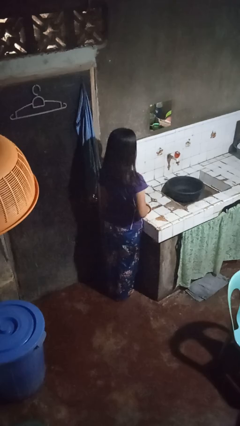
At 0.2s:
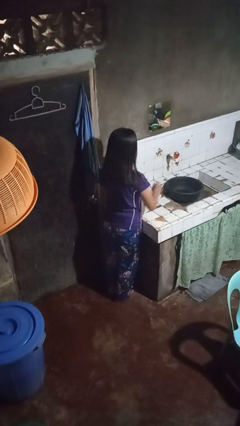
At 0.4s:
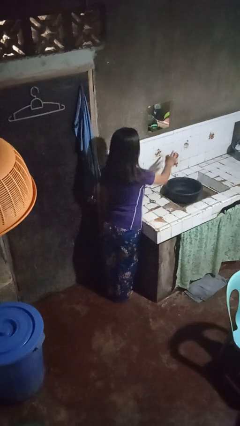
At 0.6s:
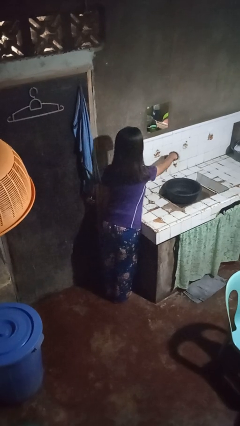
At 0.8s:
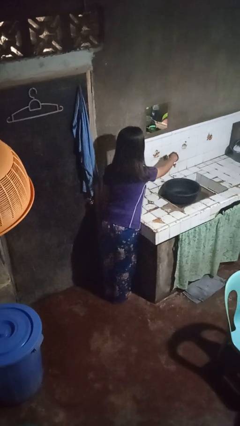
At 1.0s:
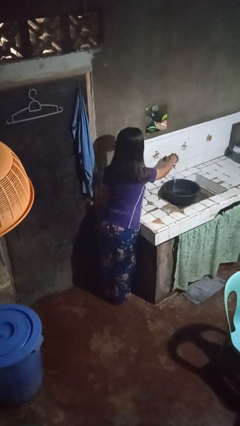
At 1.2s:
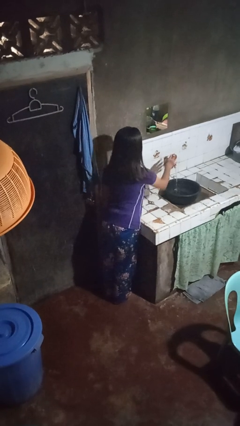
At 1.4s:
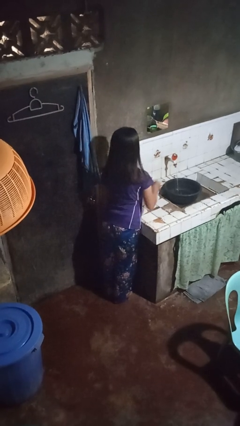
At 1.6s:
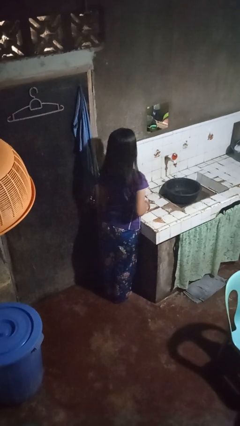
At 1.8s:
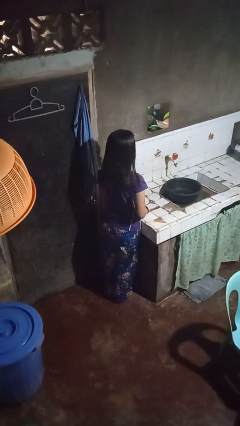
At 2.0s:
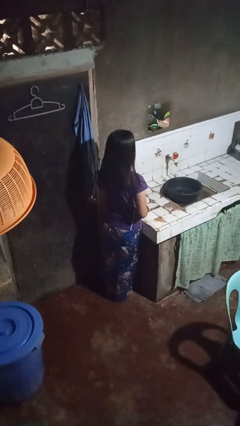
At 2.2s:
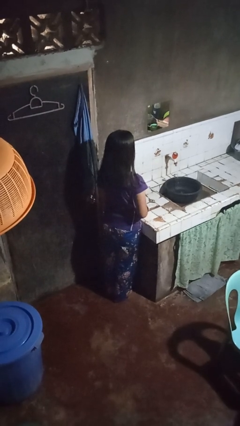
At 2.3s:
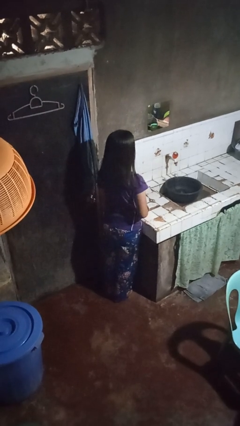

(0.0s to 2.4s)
person turns on faucet

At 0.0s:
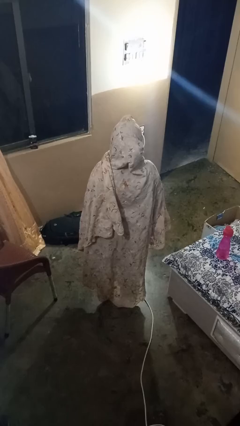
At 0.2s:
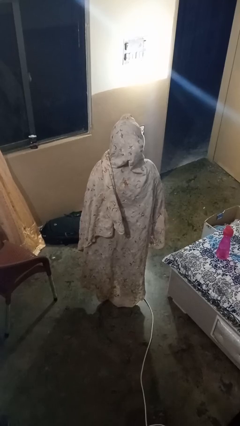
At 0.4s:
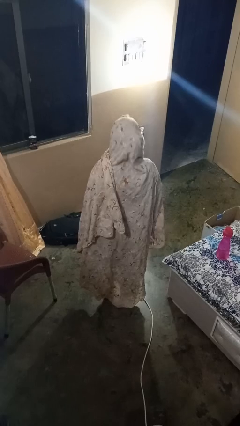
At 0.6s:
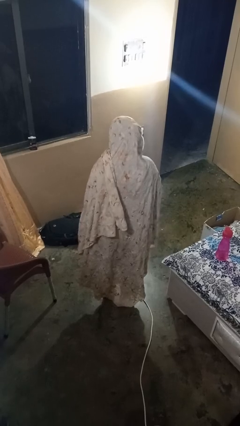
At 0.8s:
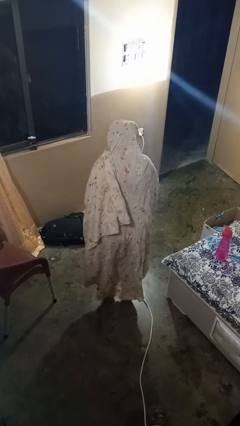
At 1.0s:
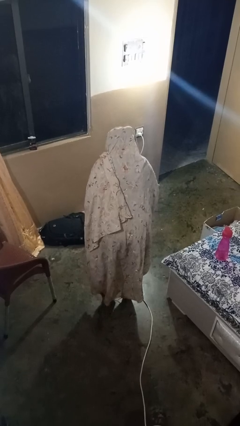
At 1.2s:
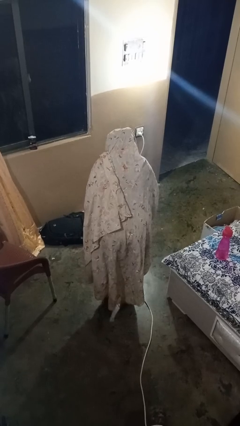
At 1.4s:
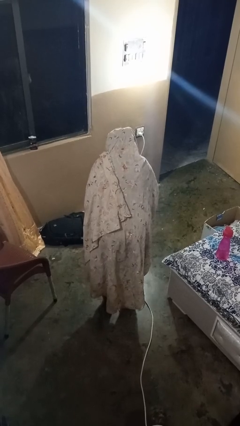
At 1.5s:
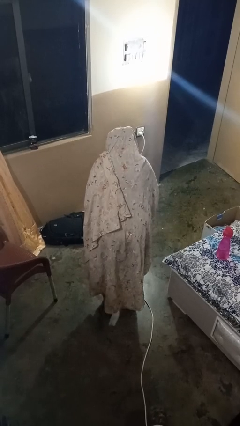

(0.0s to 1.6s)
person bows

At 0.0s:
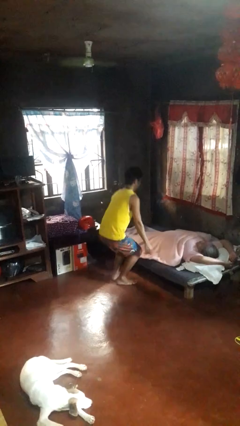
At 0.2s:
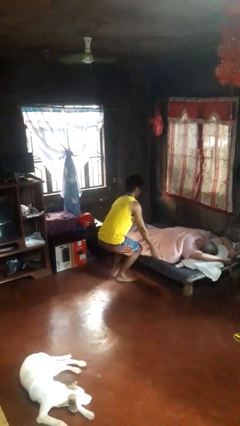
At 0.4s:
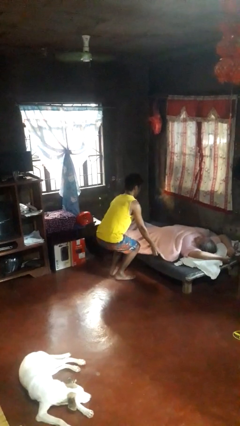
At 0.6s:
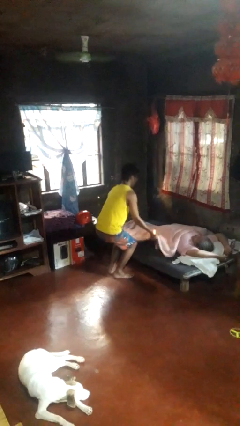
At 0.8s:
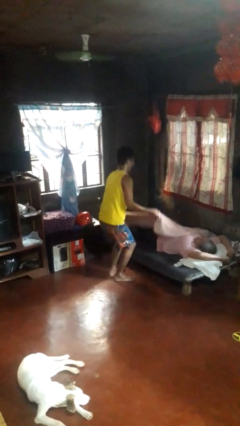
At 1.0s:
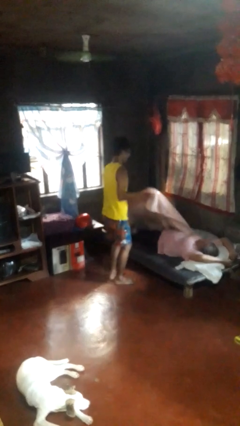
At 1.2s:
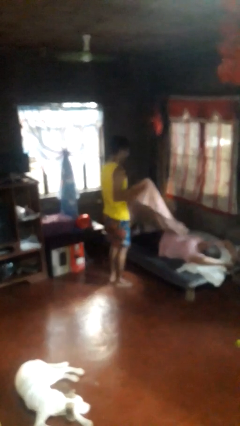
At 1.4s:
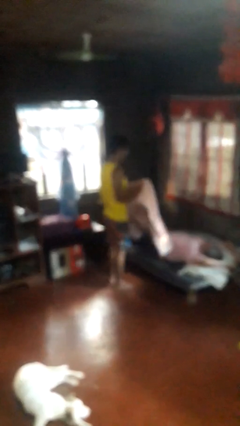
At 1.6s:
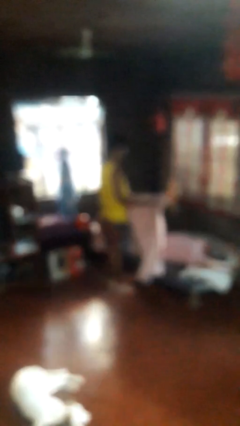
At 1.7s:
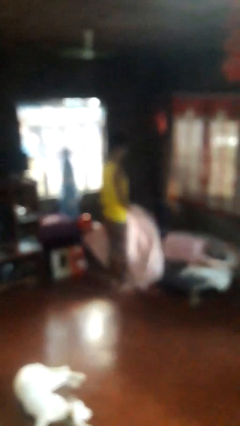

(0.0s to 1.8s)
person uncovers friend with blanket

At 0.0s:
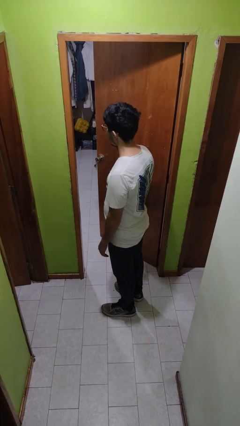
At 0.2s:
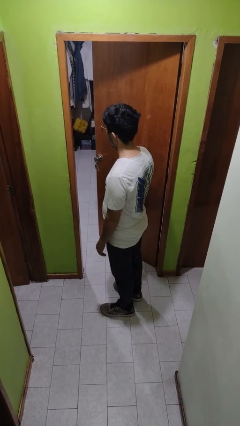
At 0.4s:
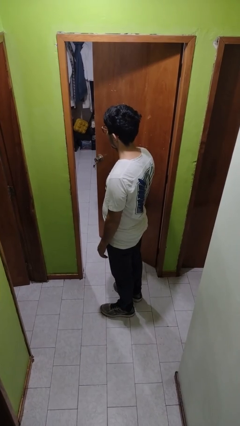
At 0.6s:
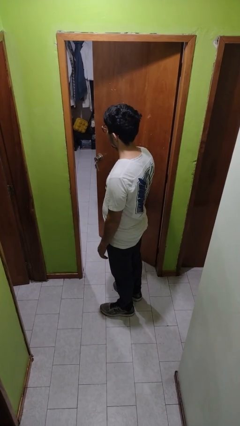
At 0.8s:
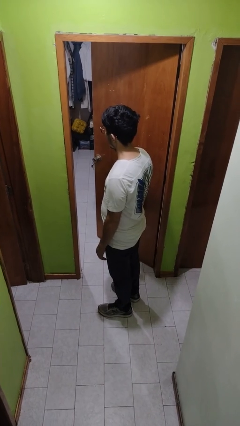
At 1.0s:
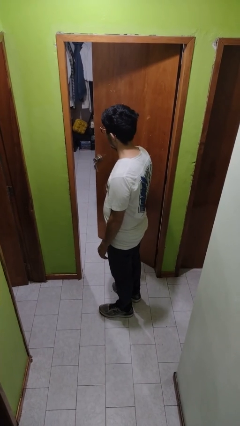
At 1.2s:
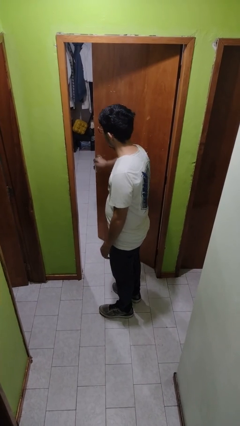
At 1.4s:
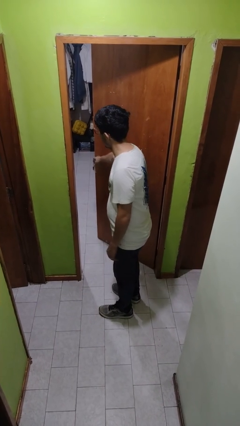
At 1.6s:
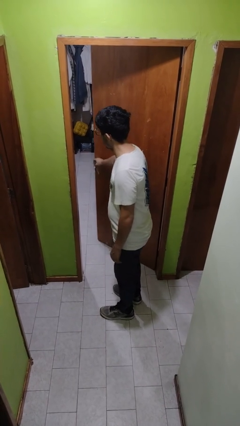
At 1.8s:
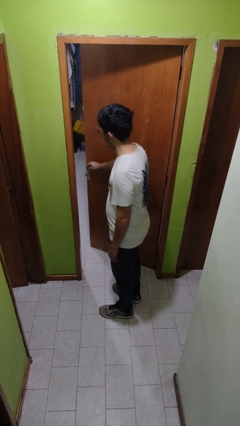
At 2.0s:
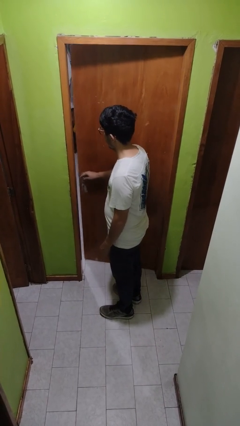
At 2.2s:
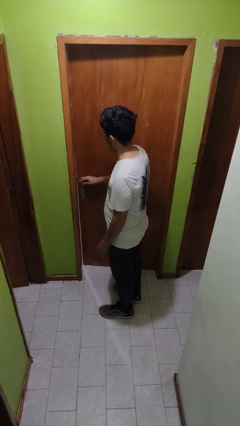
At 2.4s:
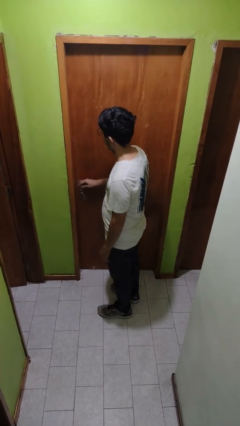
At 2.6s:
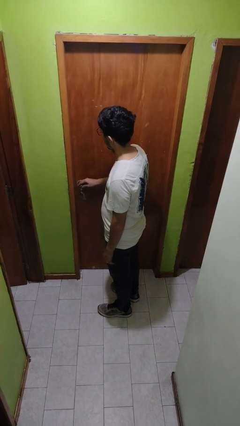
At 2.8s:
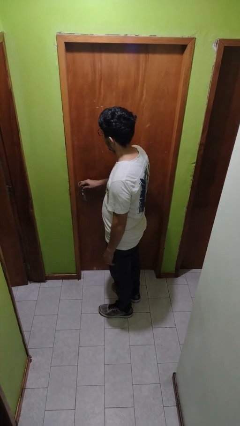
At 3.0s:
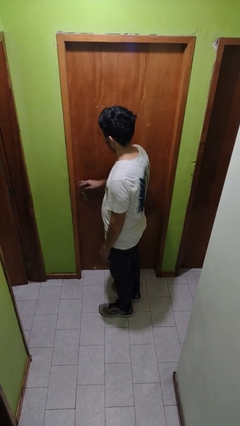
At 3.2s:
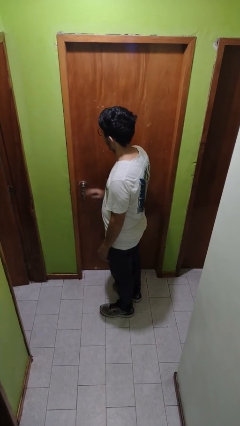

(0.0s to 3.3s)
person closes facility door

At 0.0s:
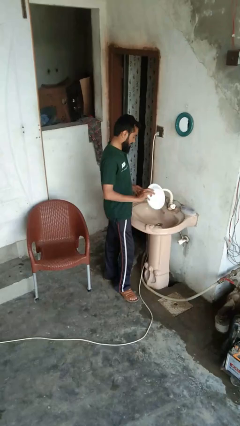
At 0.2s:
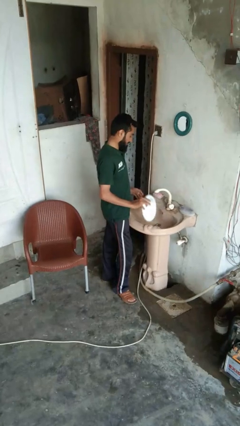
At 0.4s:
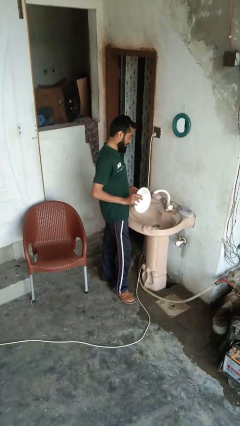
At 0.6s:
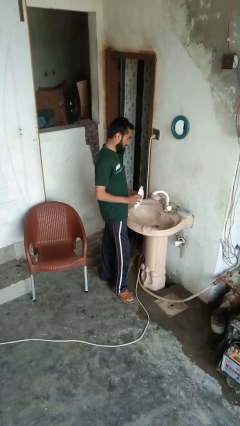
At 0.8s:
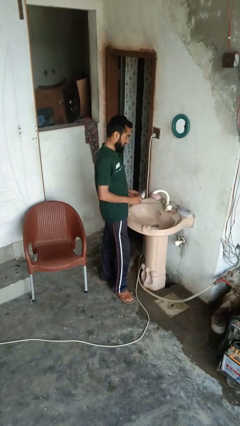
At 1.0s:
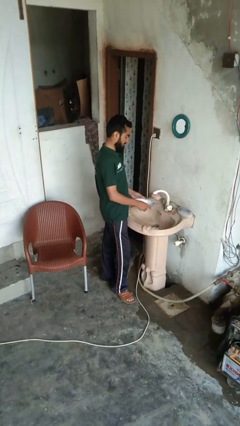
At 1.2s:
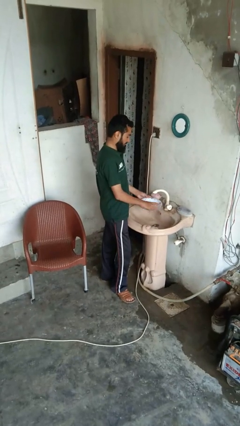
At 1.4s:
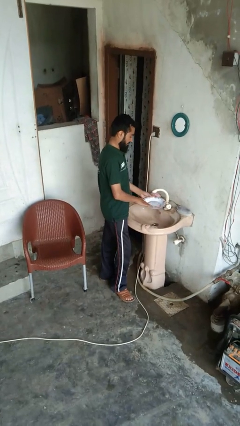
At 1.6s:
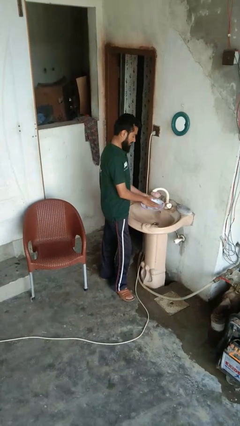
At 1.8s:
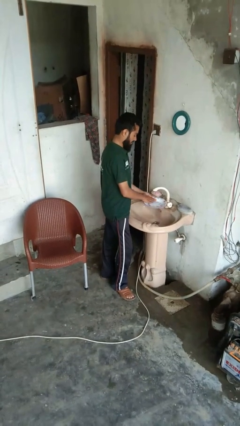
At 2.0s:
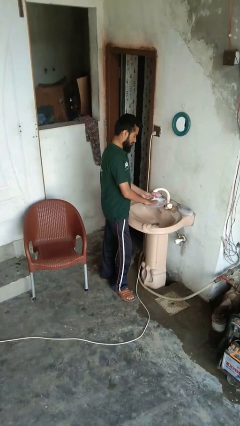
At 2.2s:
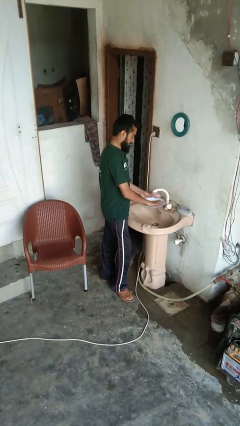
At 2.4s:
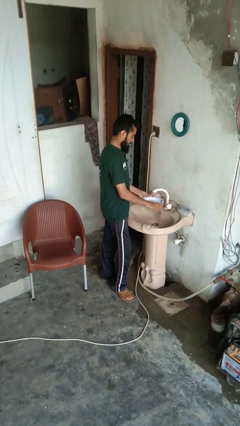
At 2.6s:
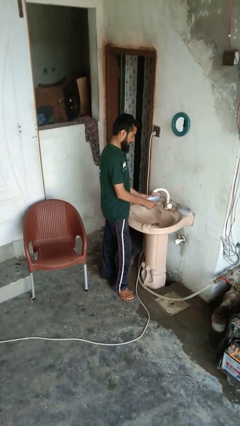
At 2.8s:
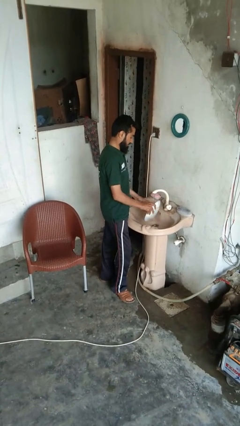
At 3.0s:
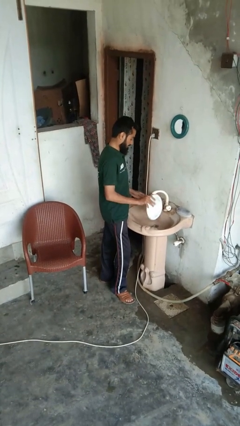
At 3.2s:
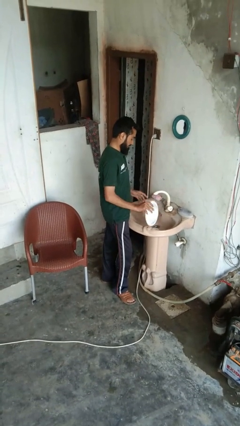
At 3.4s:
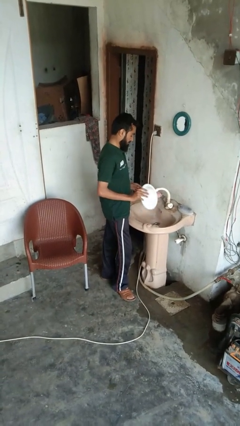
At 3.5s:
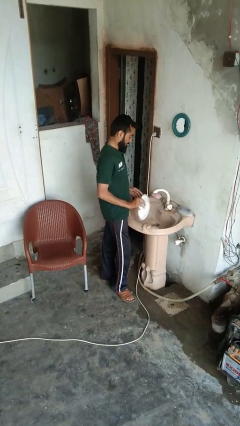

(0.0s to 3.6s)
person washes dish

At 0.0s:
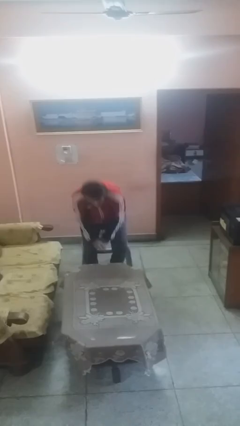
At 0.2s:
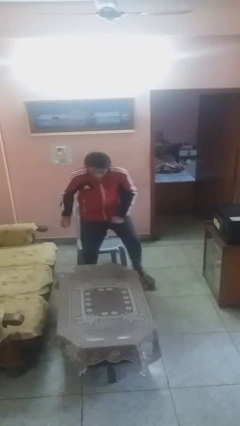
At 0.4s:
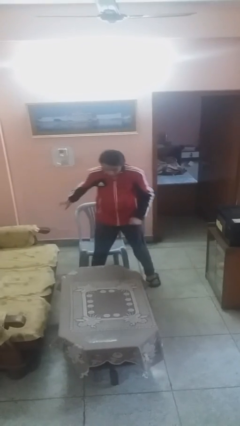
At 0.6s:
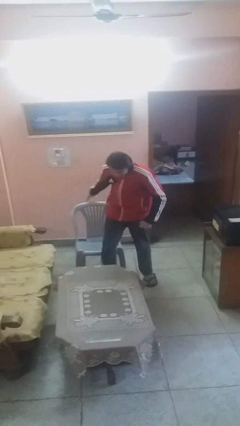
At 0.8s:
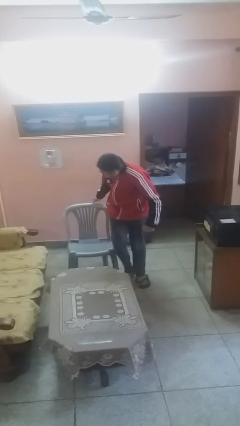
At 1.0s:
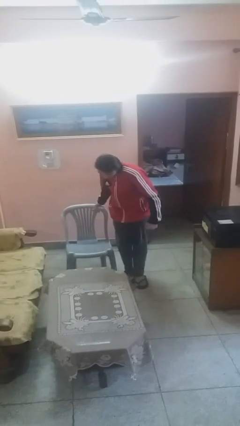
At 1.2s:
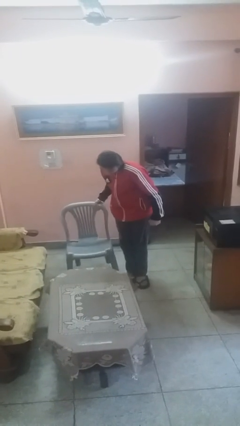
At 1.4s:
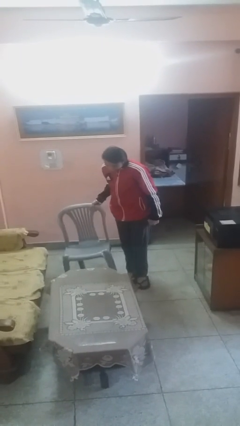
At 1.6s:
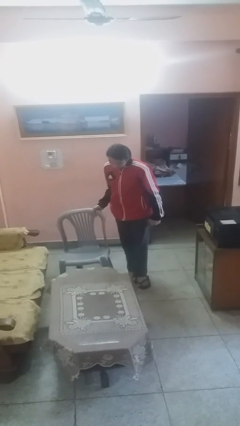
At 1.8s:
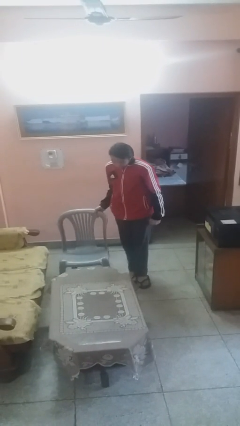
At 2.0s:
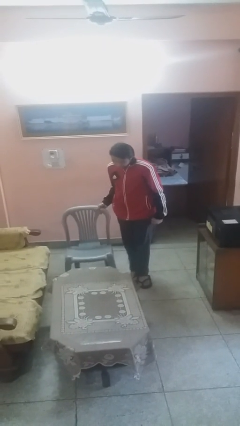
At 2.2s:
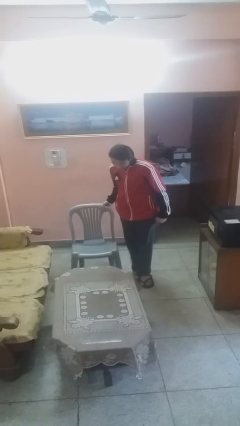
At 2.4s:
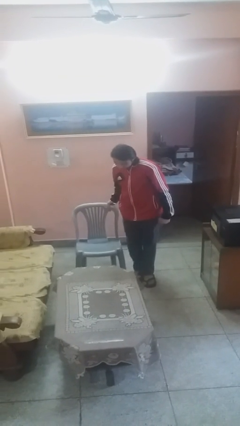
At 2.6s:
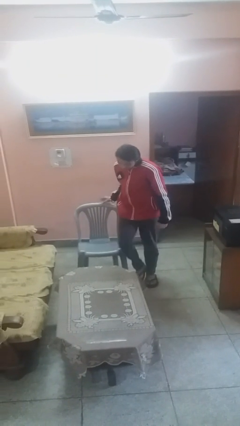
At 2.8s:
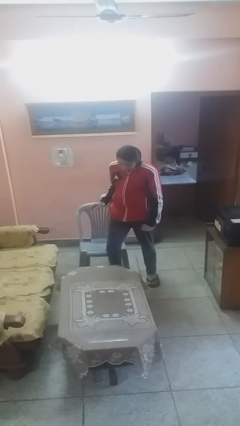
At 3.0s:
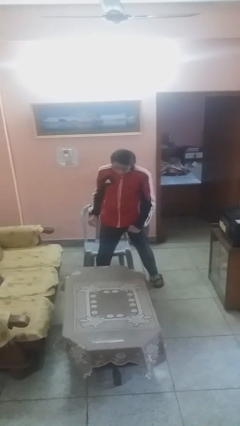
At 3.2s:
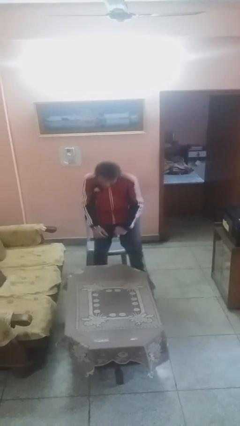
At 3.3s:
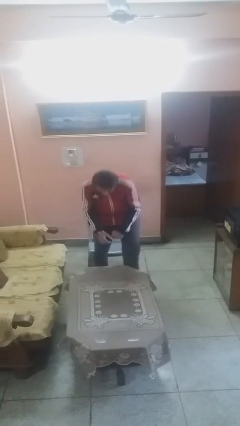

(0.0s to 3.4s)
person stands up

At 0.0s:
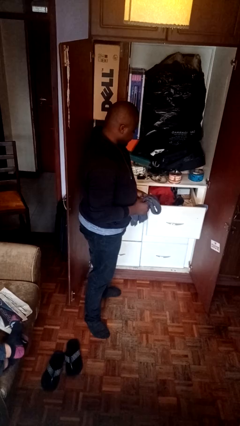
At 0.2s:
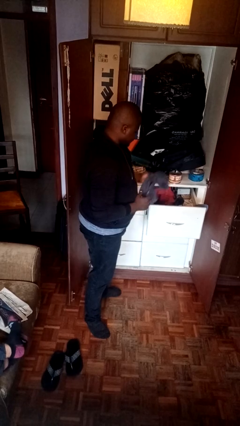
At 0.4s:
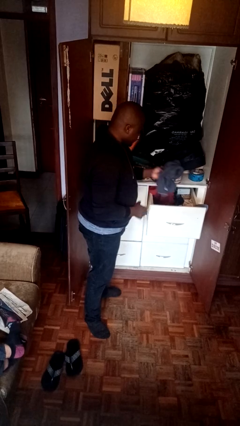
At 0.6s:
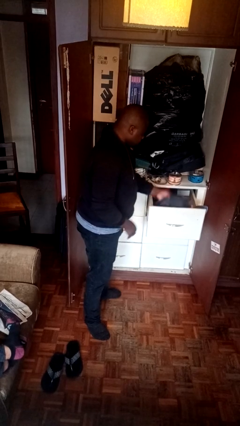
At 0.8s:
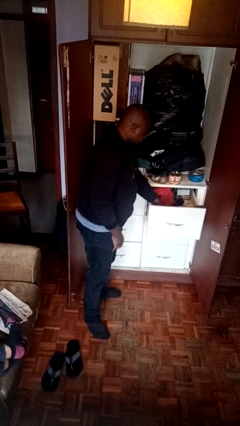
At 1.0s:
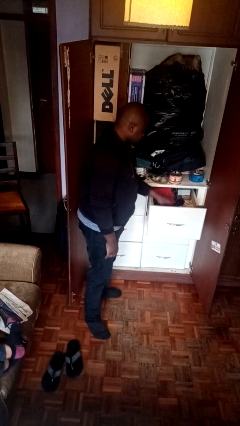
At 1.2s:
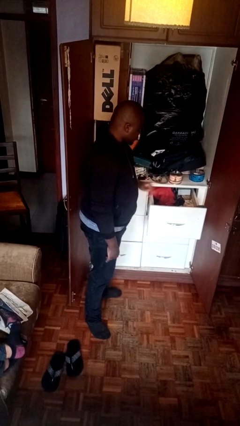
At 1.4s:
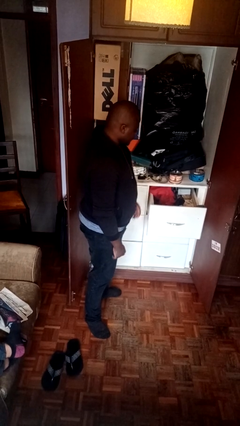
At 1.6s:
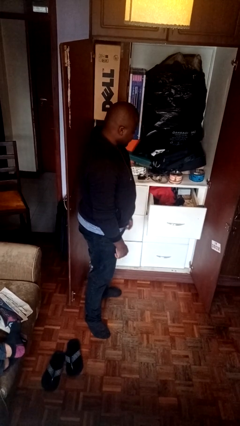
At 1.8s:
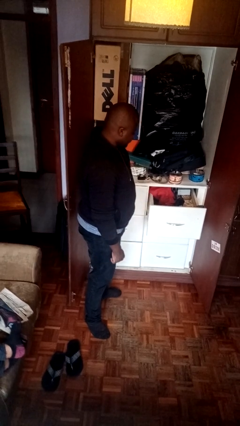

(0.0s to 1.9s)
person puts clothes into dresser
